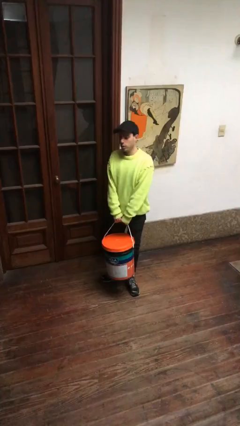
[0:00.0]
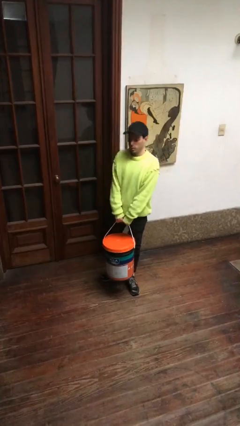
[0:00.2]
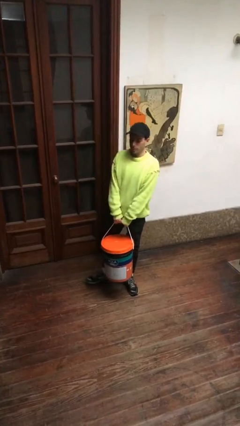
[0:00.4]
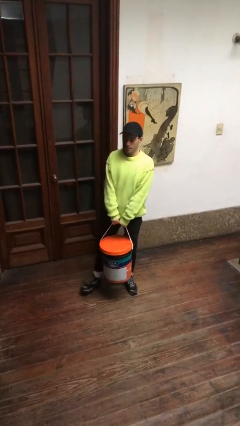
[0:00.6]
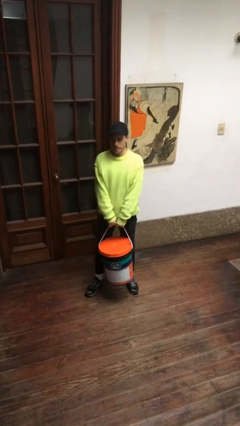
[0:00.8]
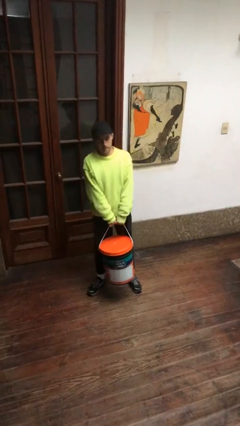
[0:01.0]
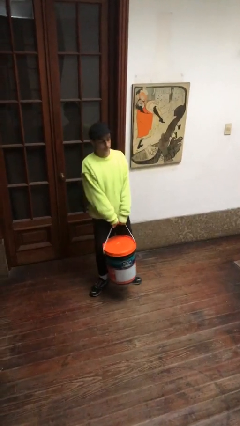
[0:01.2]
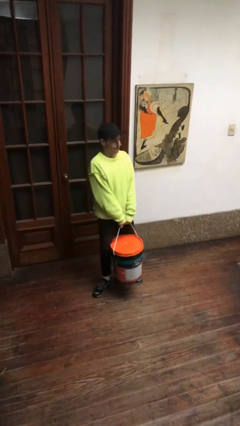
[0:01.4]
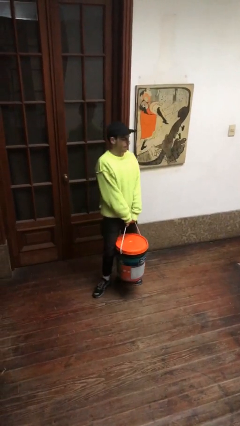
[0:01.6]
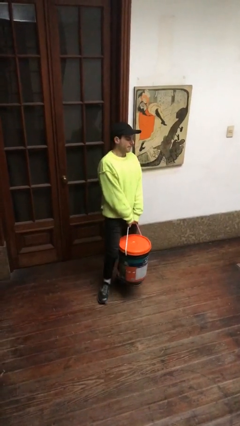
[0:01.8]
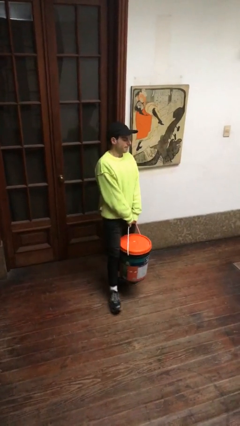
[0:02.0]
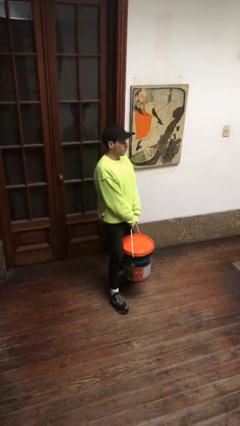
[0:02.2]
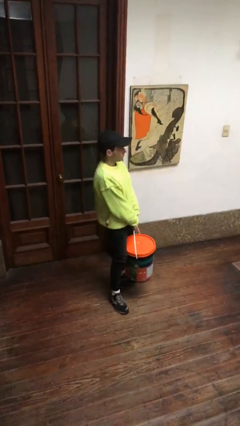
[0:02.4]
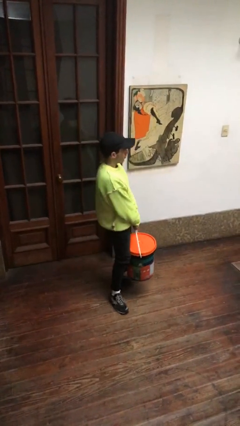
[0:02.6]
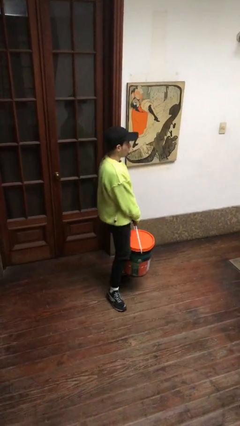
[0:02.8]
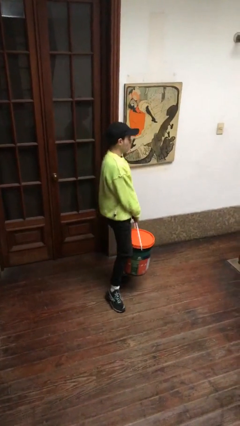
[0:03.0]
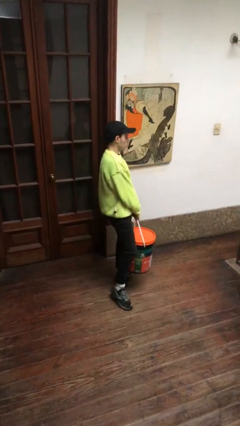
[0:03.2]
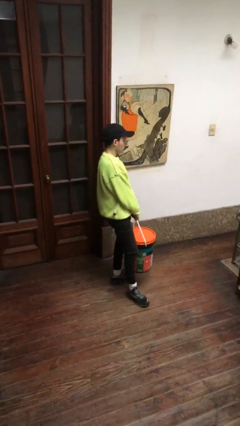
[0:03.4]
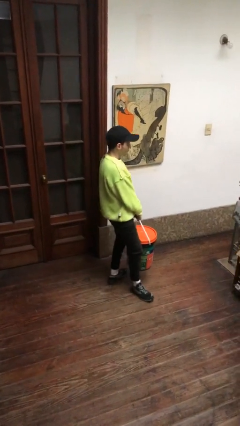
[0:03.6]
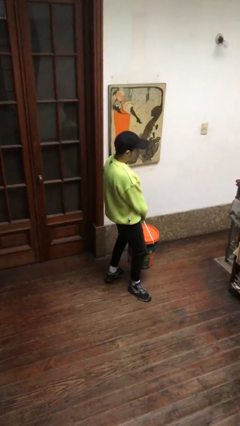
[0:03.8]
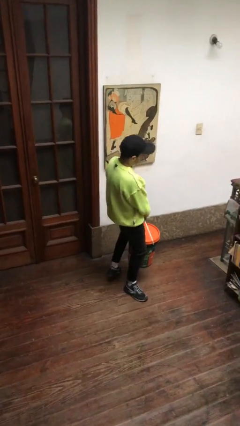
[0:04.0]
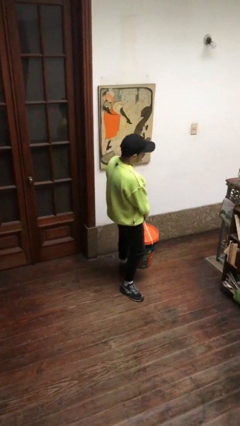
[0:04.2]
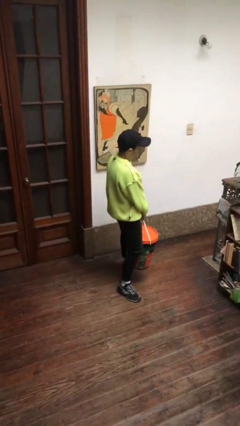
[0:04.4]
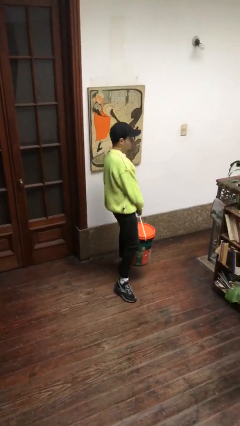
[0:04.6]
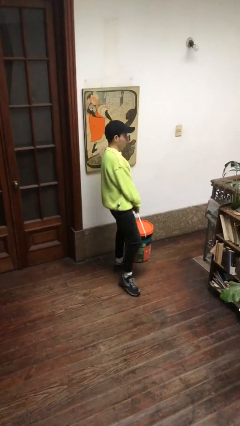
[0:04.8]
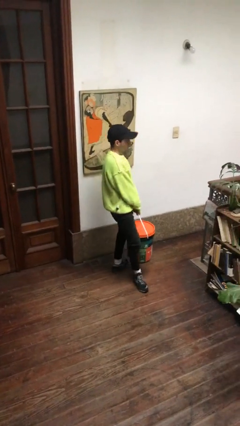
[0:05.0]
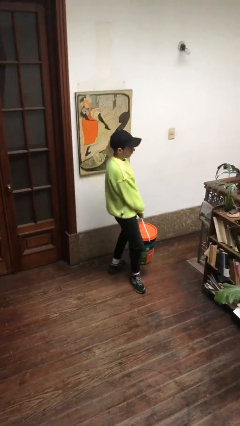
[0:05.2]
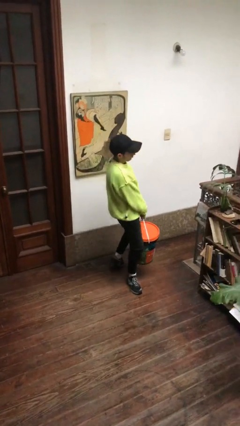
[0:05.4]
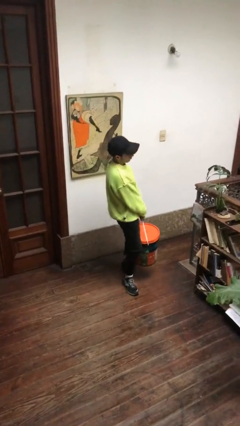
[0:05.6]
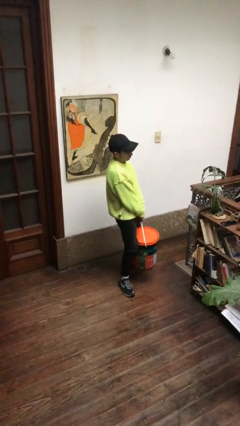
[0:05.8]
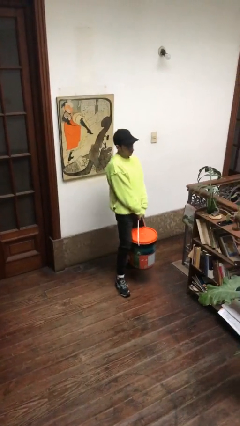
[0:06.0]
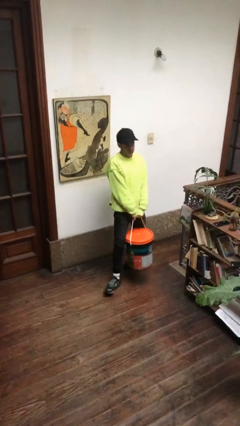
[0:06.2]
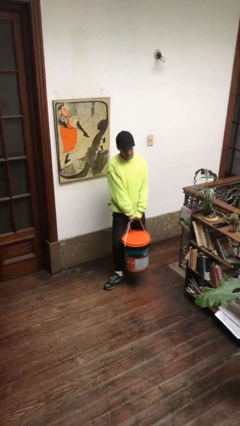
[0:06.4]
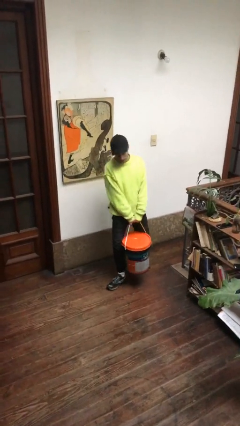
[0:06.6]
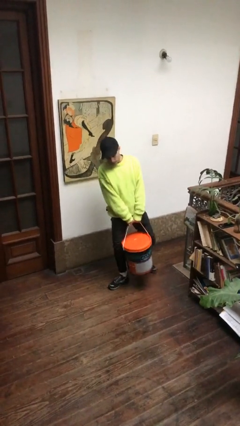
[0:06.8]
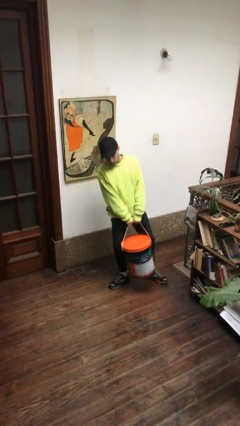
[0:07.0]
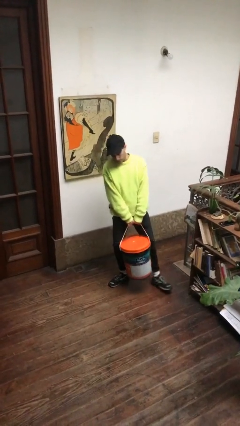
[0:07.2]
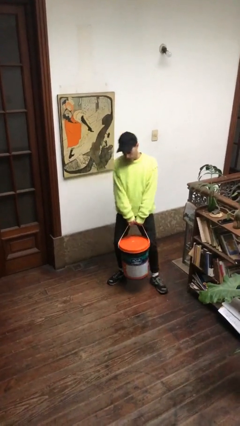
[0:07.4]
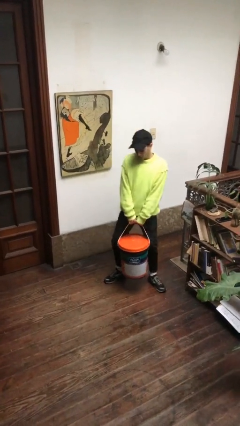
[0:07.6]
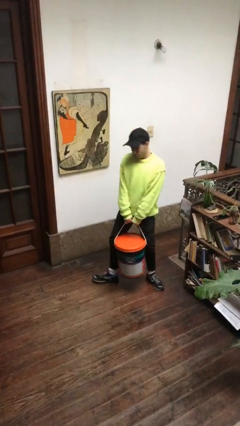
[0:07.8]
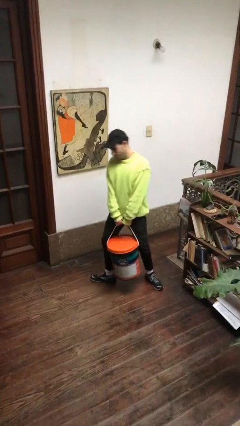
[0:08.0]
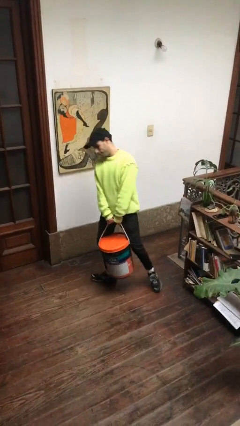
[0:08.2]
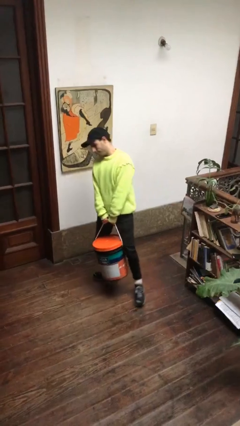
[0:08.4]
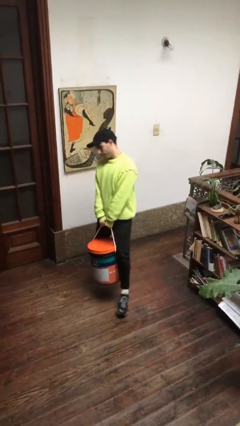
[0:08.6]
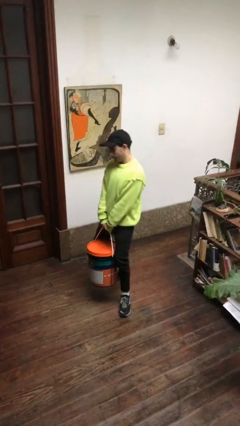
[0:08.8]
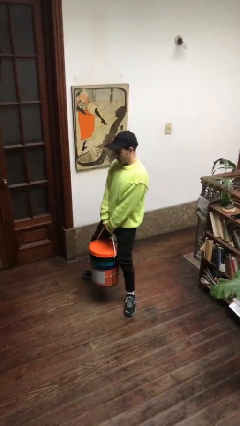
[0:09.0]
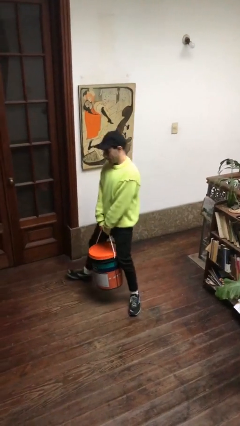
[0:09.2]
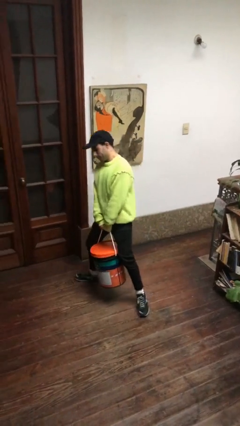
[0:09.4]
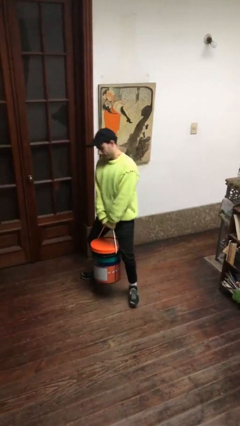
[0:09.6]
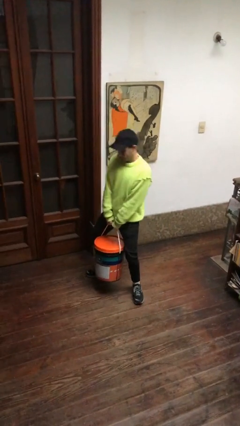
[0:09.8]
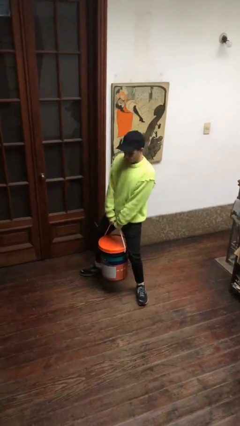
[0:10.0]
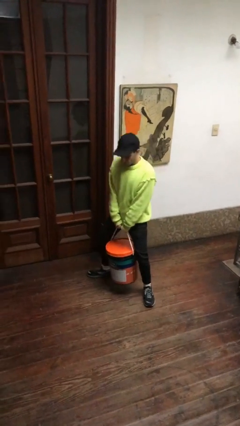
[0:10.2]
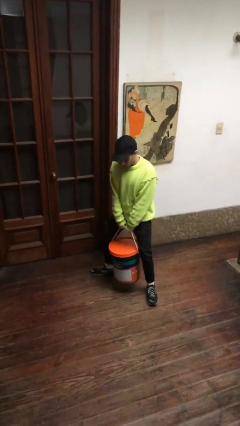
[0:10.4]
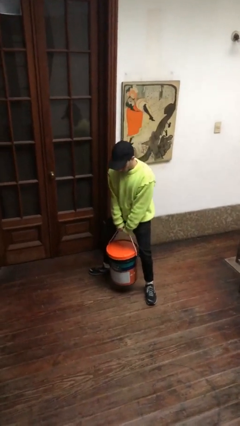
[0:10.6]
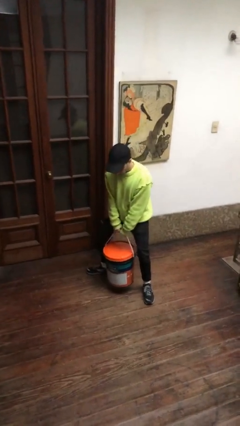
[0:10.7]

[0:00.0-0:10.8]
person carries heavy object

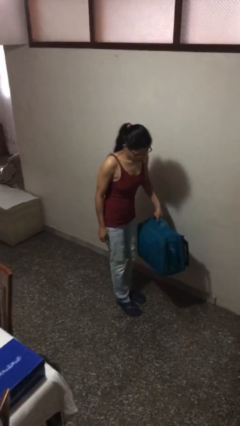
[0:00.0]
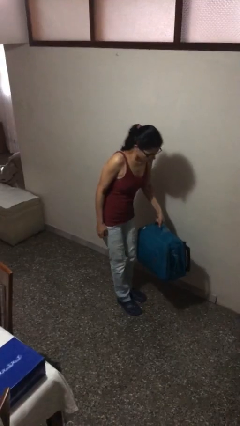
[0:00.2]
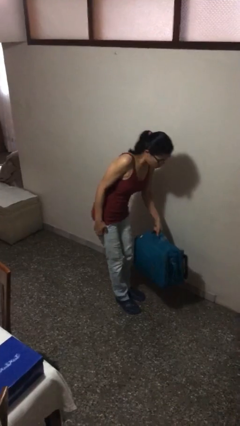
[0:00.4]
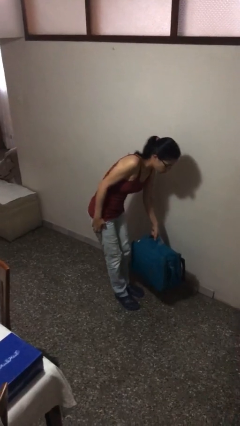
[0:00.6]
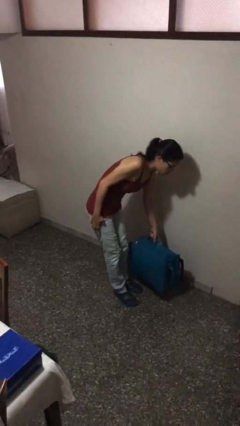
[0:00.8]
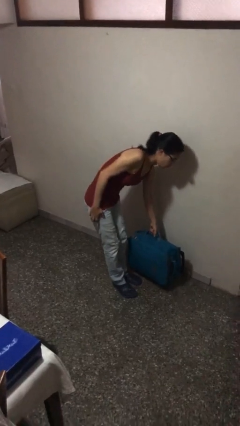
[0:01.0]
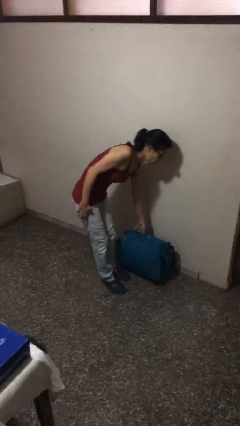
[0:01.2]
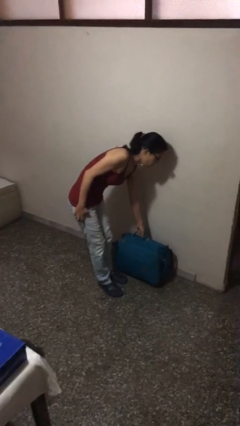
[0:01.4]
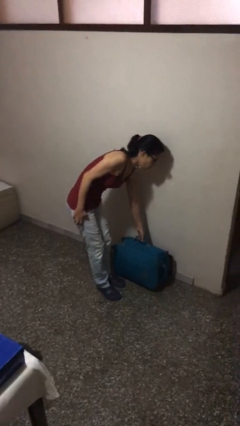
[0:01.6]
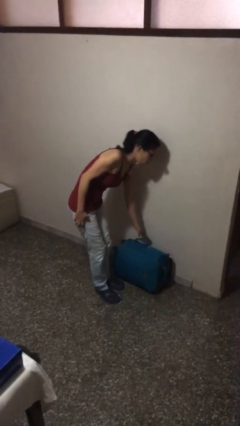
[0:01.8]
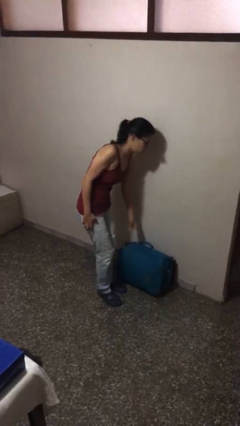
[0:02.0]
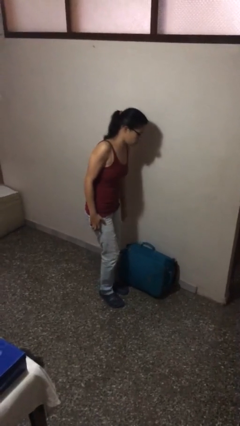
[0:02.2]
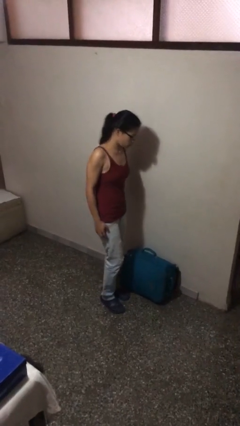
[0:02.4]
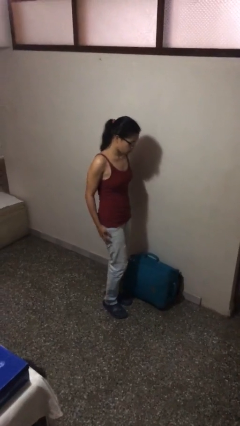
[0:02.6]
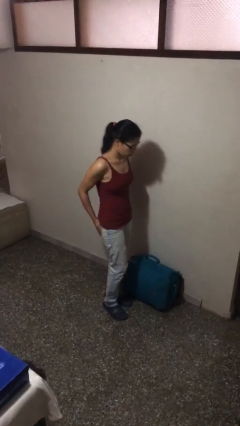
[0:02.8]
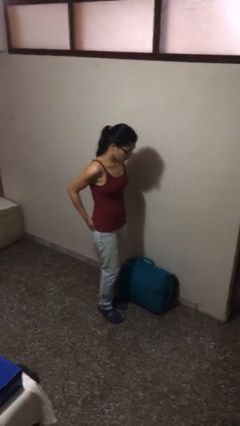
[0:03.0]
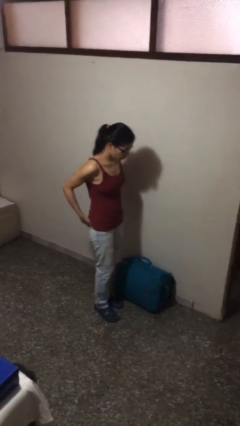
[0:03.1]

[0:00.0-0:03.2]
person puts down object on floor

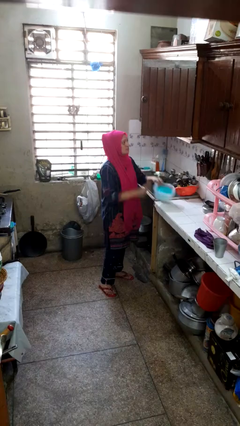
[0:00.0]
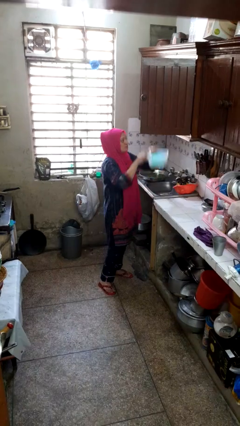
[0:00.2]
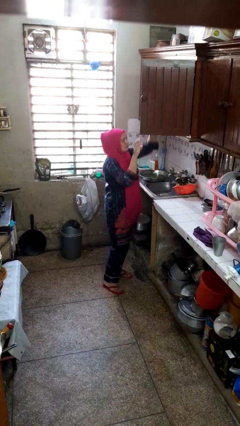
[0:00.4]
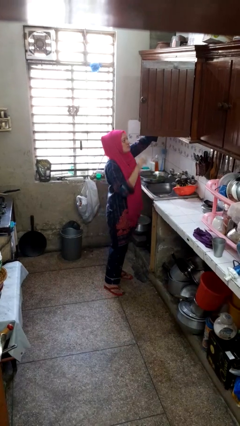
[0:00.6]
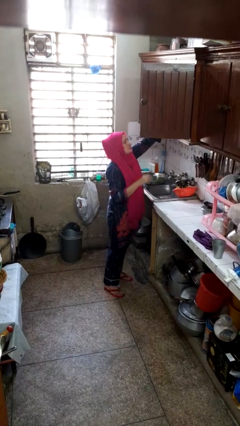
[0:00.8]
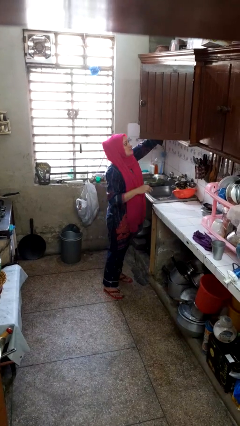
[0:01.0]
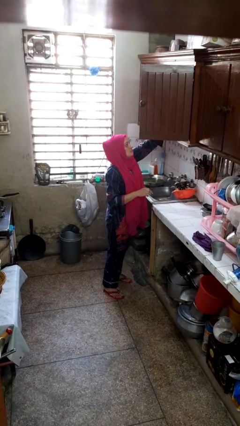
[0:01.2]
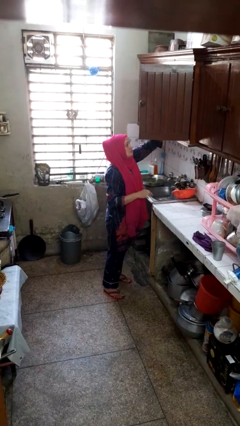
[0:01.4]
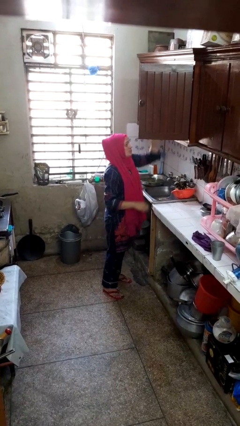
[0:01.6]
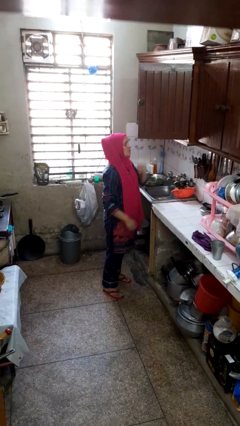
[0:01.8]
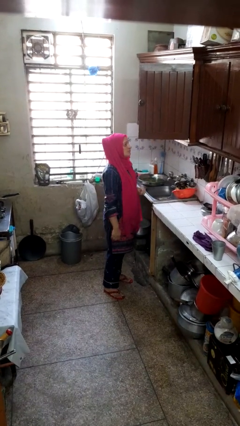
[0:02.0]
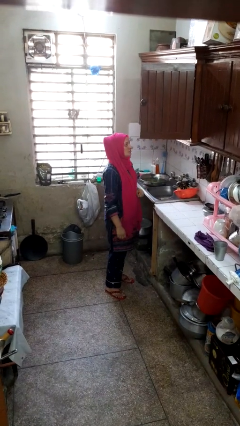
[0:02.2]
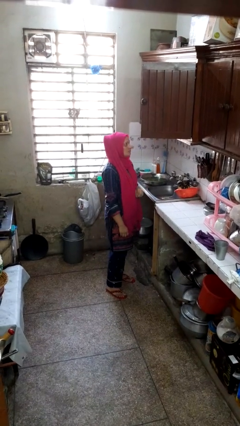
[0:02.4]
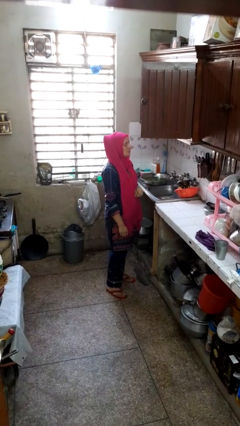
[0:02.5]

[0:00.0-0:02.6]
person puts object in cabinet

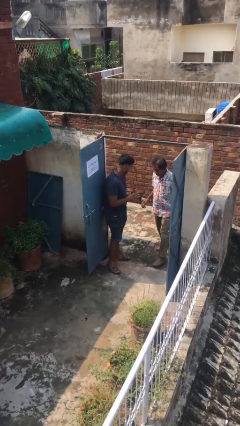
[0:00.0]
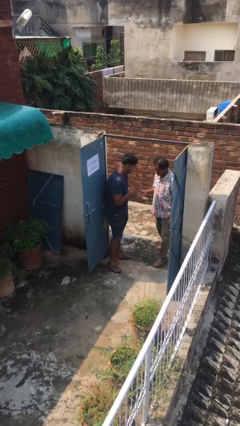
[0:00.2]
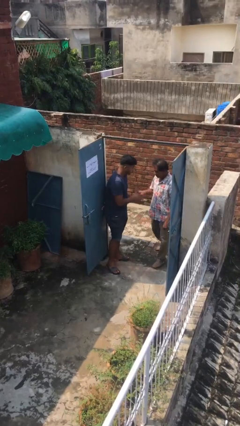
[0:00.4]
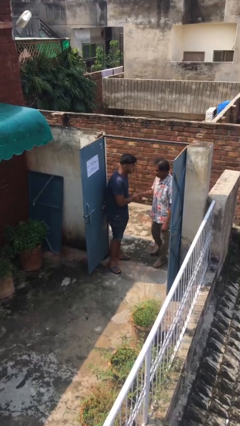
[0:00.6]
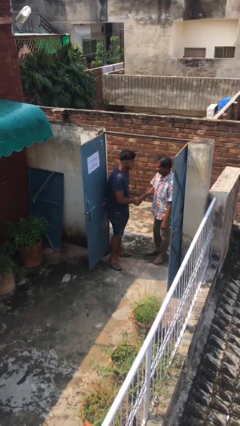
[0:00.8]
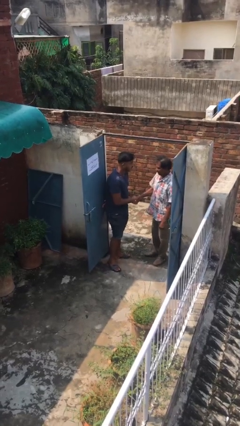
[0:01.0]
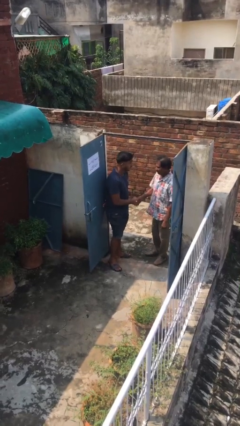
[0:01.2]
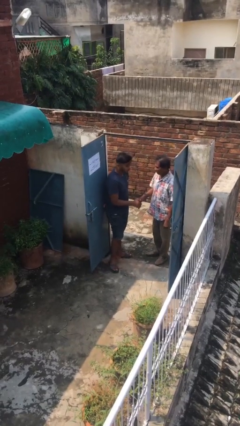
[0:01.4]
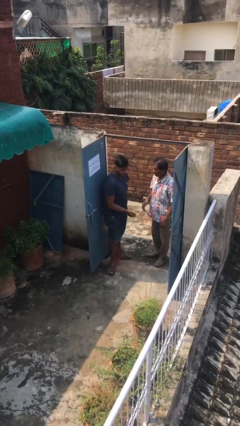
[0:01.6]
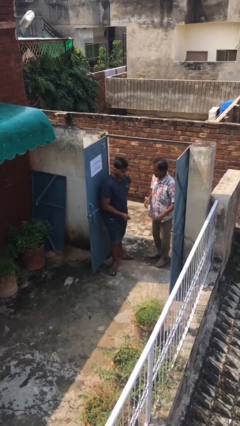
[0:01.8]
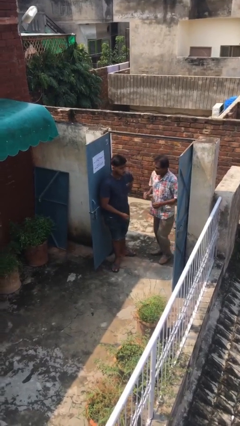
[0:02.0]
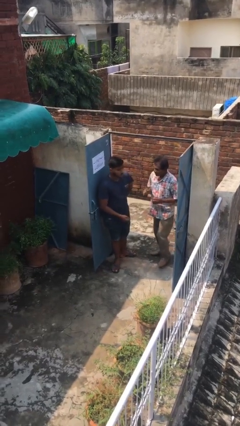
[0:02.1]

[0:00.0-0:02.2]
person shakes hand
